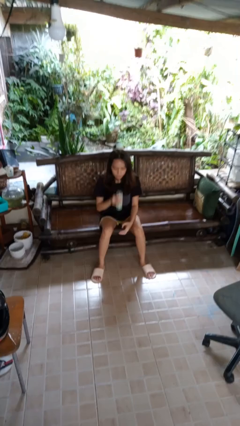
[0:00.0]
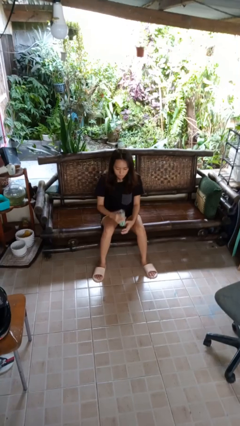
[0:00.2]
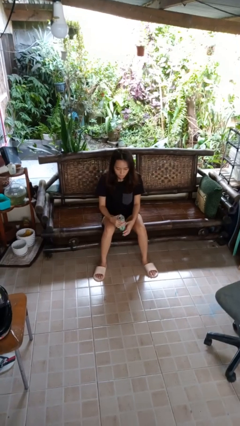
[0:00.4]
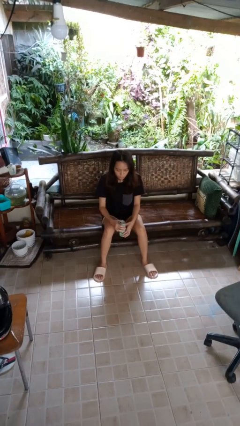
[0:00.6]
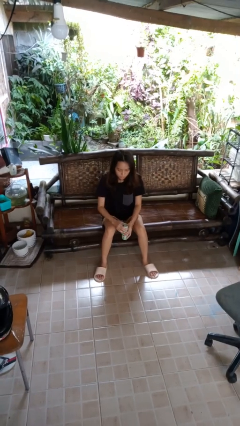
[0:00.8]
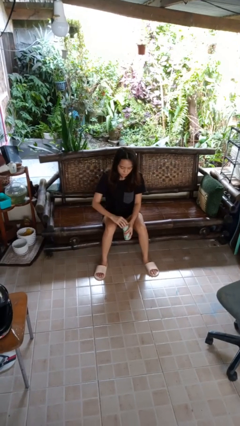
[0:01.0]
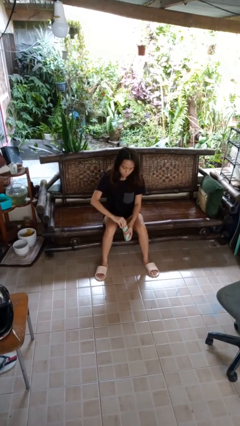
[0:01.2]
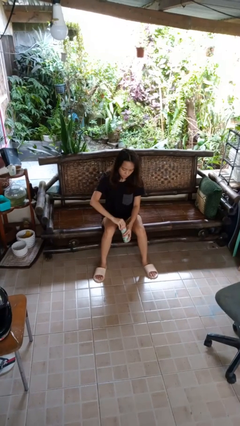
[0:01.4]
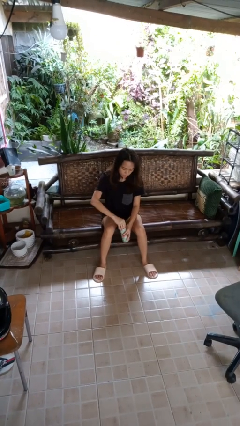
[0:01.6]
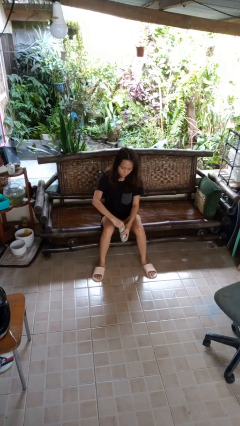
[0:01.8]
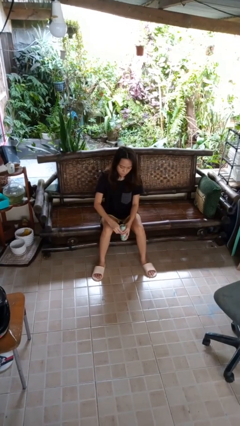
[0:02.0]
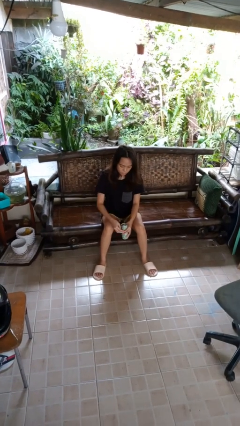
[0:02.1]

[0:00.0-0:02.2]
person opens beverage can

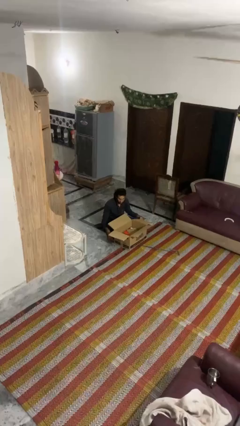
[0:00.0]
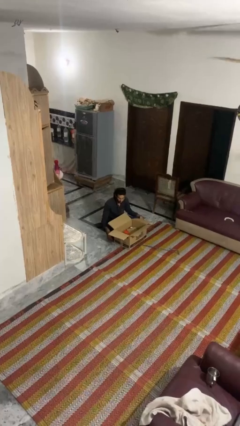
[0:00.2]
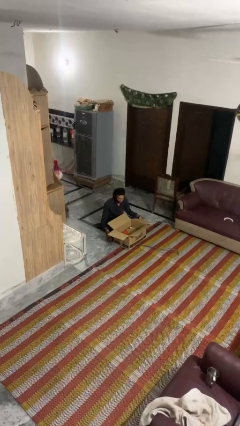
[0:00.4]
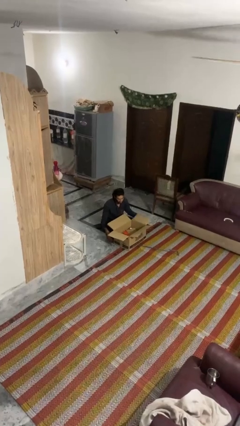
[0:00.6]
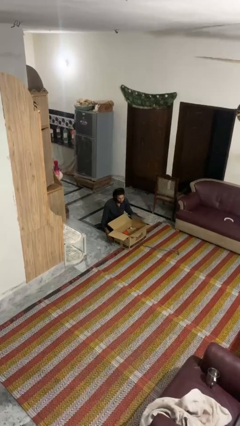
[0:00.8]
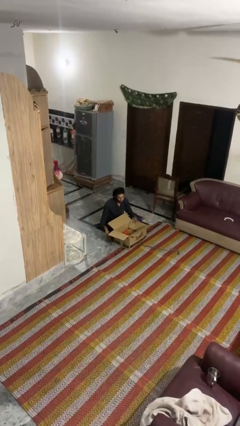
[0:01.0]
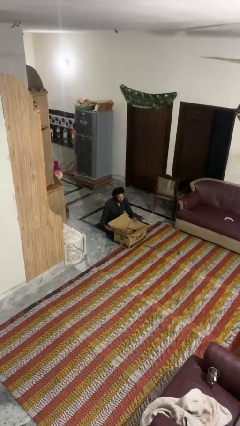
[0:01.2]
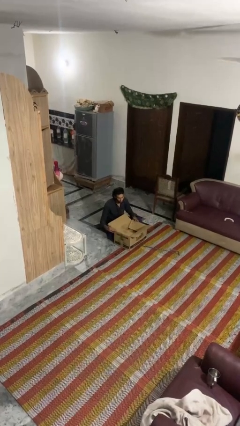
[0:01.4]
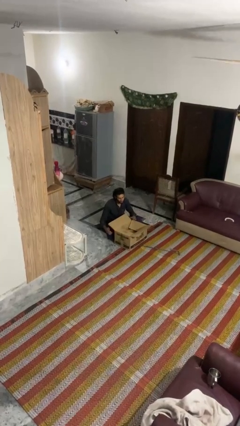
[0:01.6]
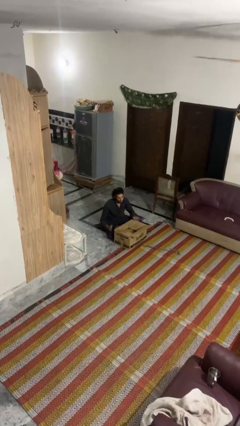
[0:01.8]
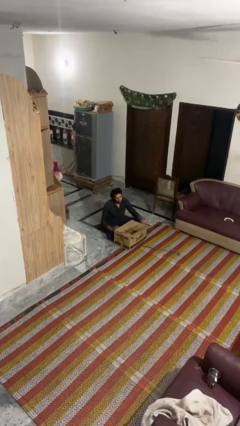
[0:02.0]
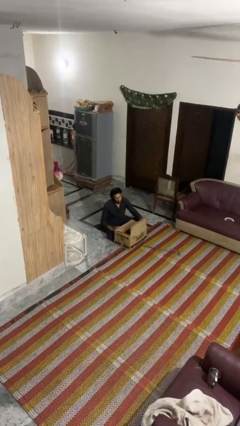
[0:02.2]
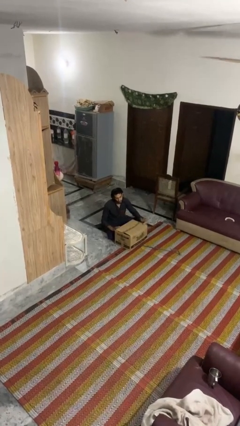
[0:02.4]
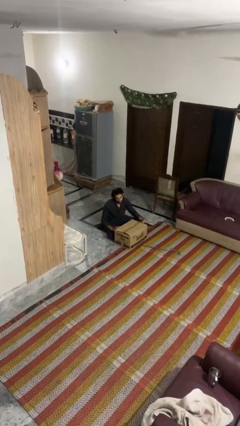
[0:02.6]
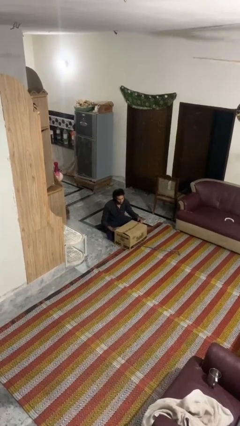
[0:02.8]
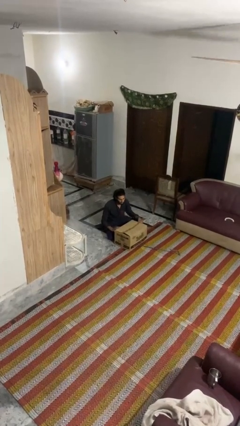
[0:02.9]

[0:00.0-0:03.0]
person closes box

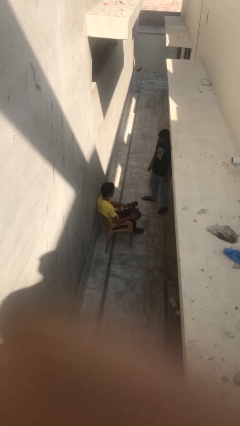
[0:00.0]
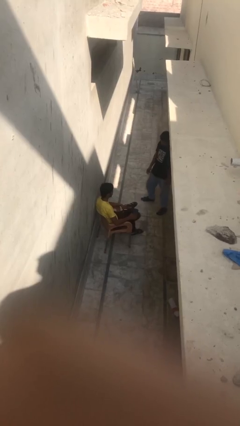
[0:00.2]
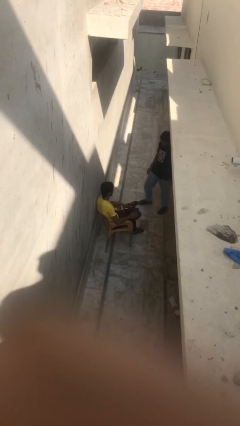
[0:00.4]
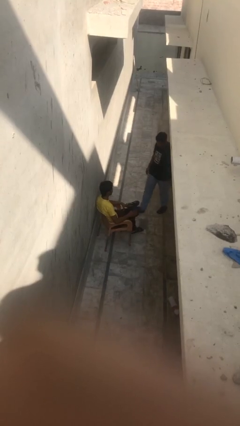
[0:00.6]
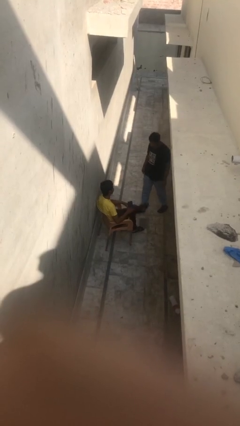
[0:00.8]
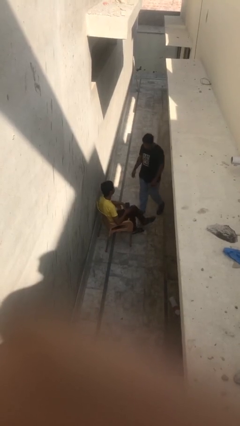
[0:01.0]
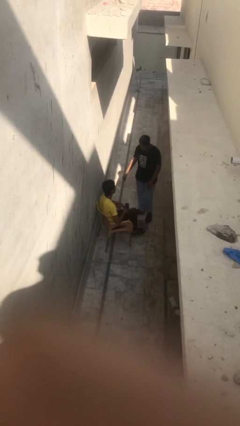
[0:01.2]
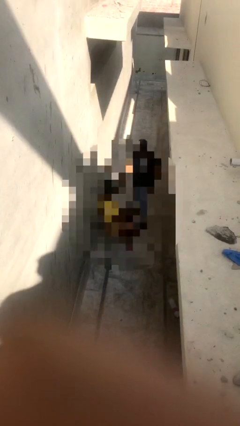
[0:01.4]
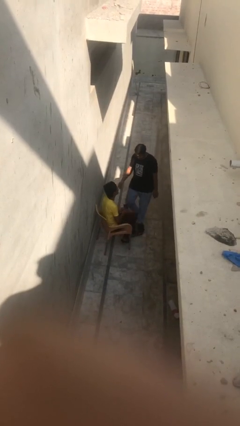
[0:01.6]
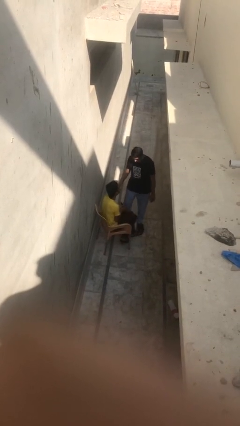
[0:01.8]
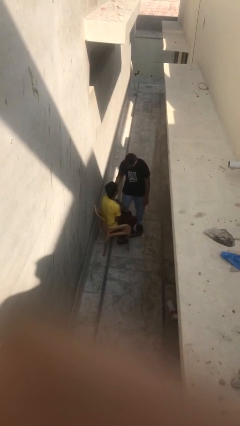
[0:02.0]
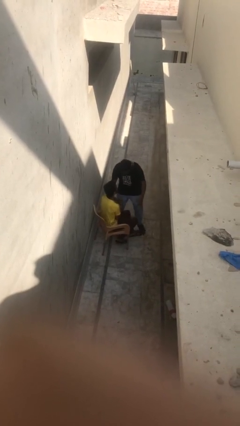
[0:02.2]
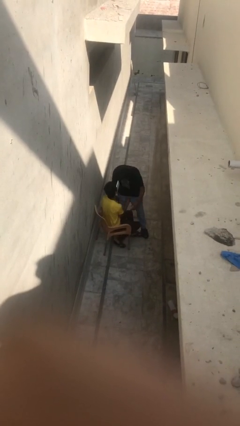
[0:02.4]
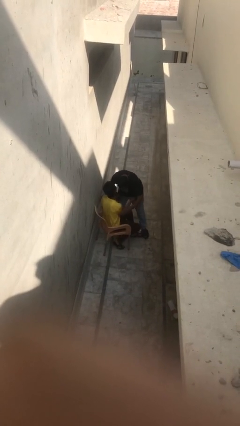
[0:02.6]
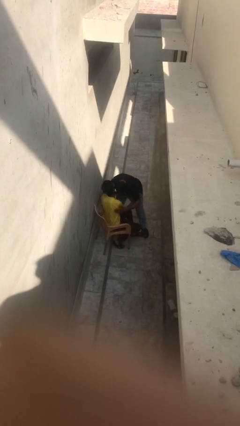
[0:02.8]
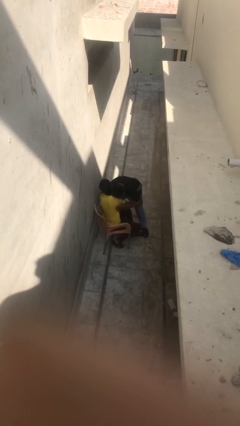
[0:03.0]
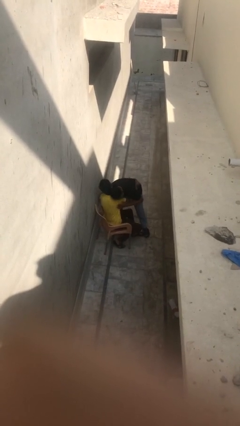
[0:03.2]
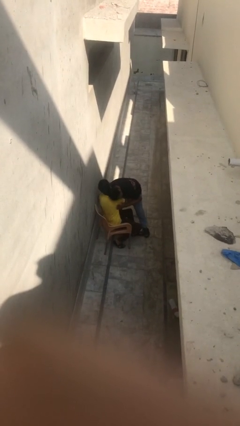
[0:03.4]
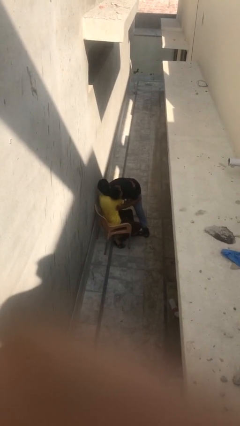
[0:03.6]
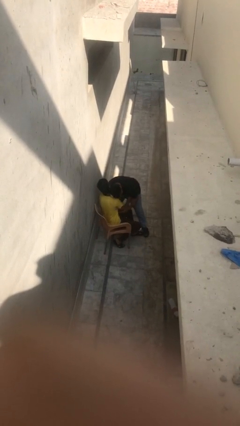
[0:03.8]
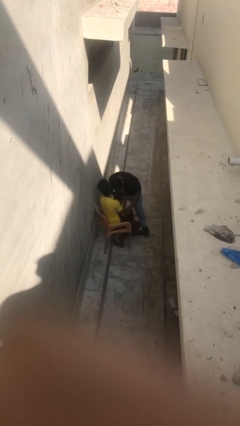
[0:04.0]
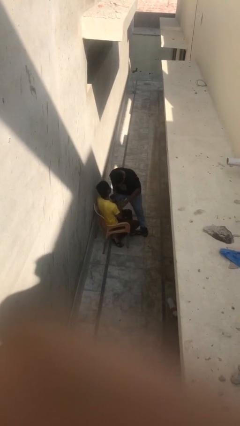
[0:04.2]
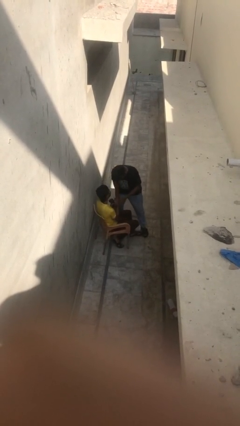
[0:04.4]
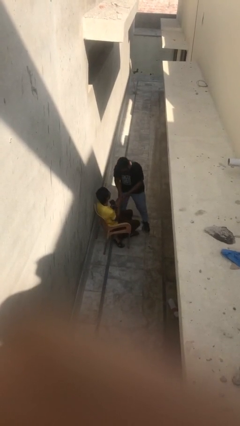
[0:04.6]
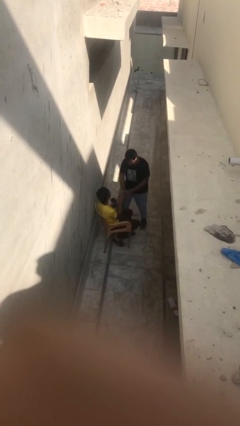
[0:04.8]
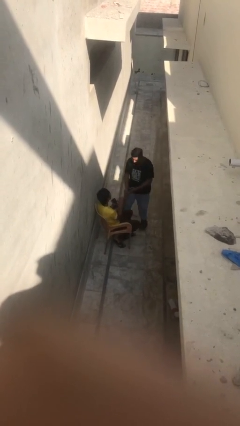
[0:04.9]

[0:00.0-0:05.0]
person embraces person

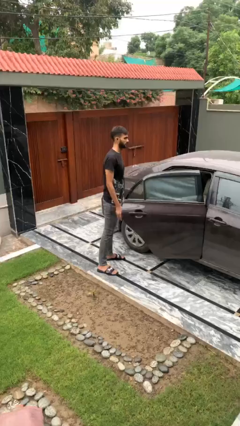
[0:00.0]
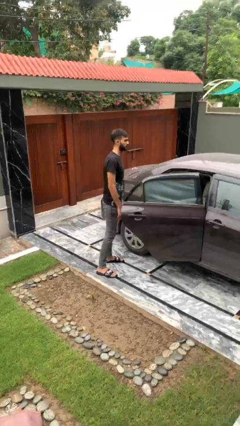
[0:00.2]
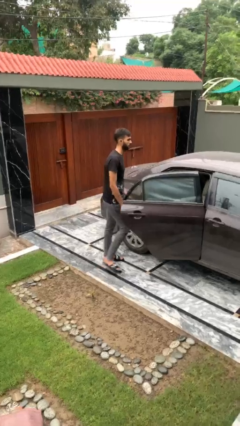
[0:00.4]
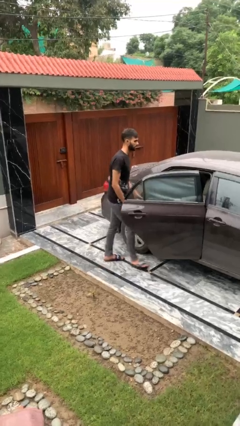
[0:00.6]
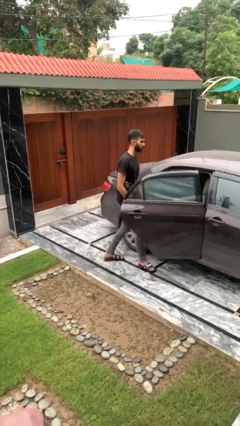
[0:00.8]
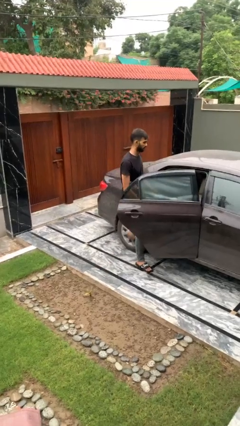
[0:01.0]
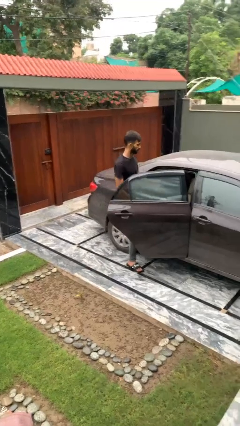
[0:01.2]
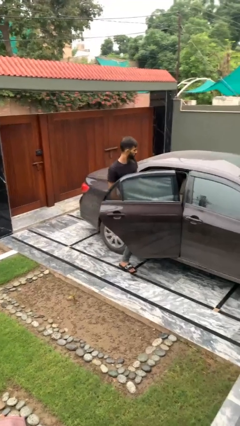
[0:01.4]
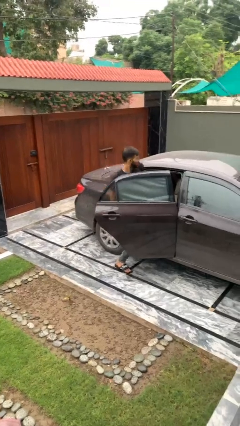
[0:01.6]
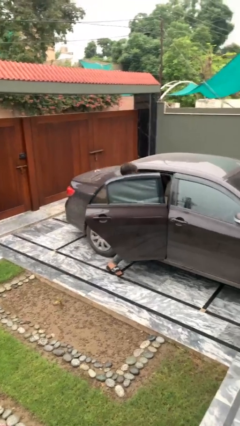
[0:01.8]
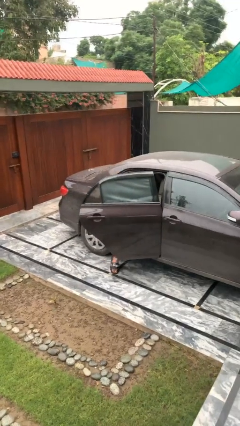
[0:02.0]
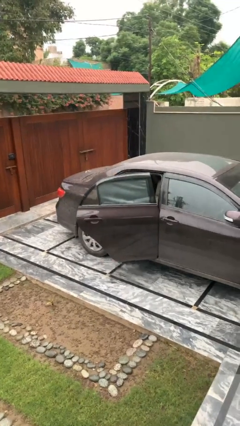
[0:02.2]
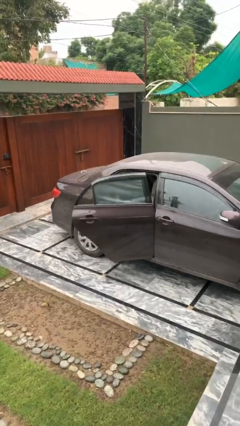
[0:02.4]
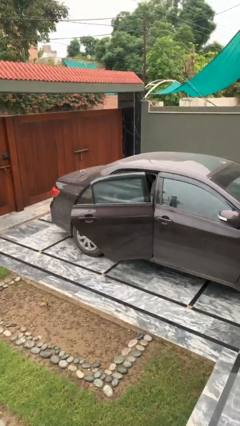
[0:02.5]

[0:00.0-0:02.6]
person enters car

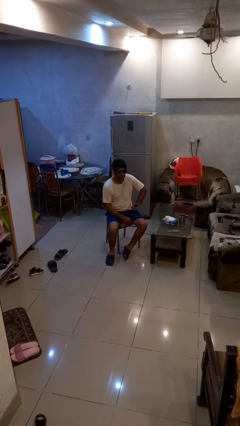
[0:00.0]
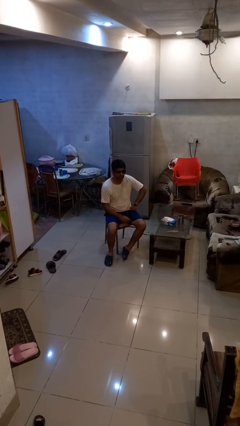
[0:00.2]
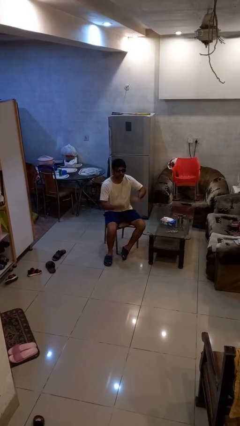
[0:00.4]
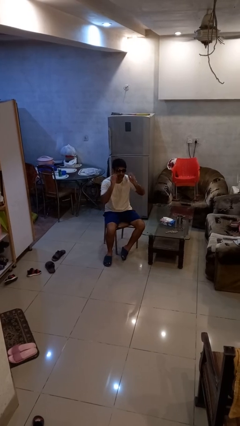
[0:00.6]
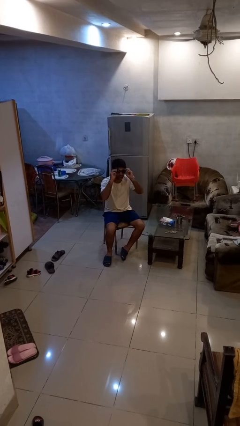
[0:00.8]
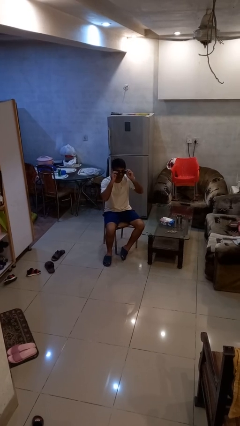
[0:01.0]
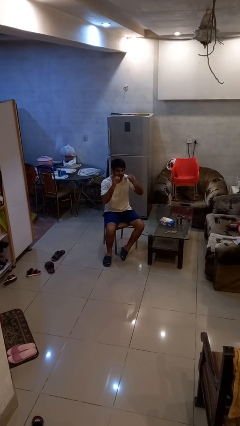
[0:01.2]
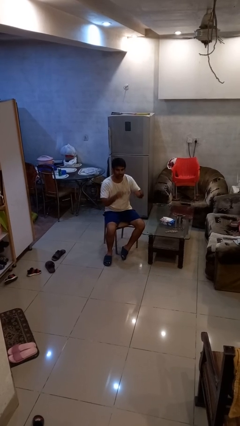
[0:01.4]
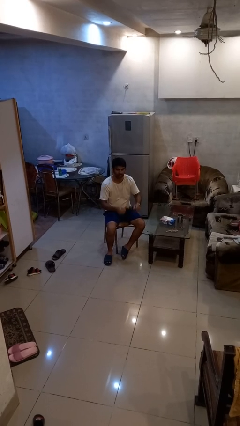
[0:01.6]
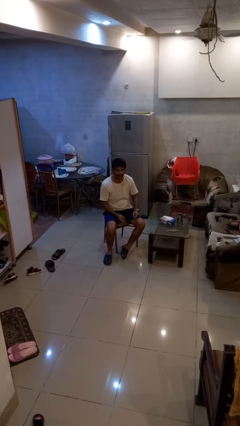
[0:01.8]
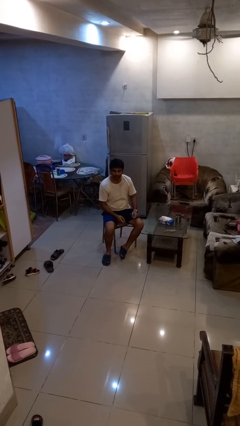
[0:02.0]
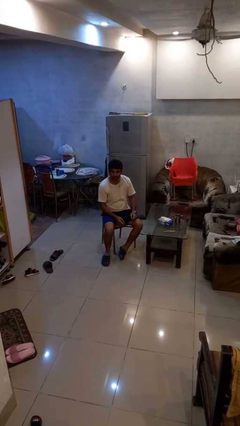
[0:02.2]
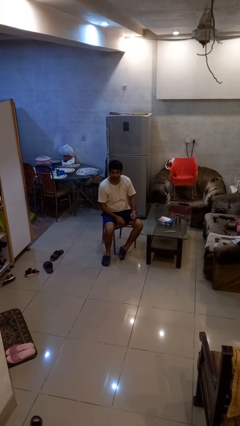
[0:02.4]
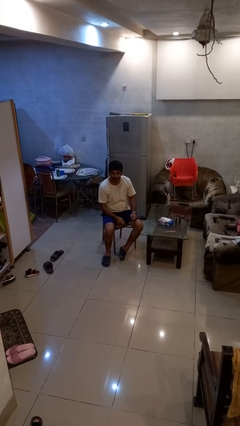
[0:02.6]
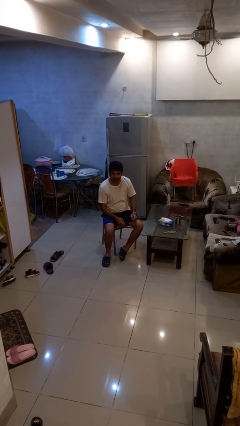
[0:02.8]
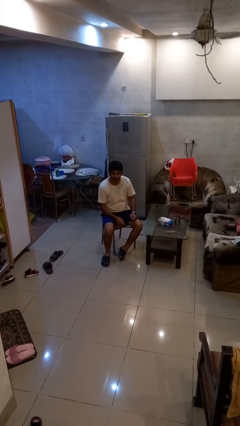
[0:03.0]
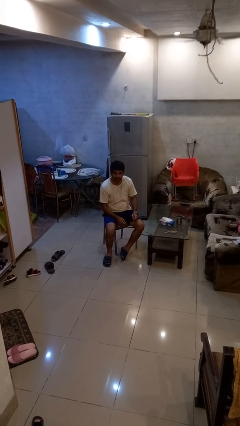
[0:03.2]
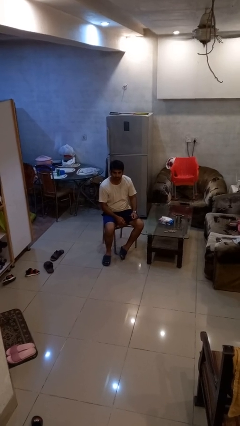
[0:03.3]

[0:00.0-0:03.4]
person takes off sunglasses

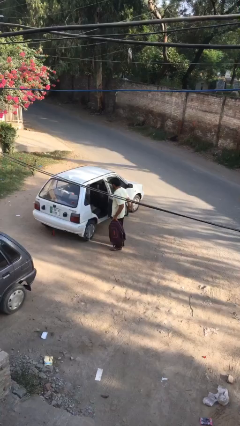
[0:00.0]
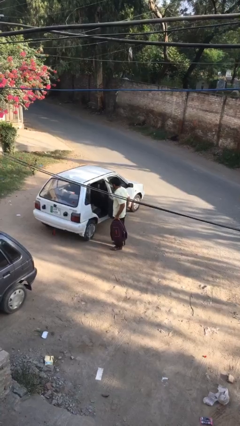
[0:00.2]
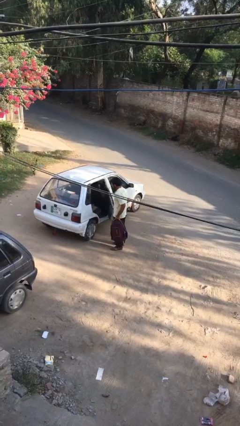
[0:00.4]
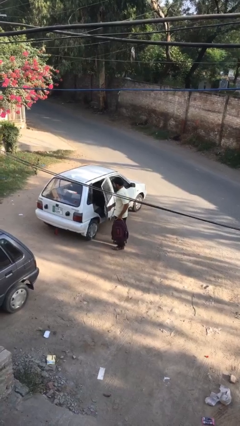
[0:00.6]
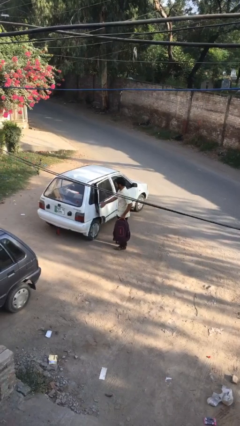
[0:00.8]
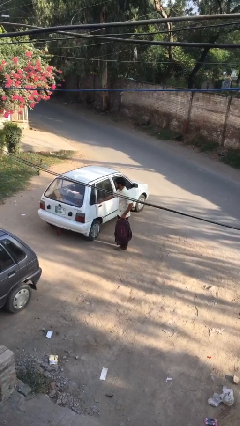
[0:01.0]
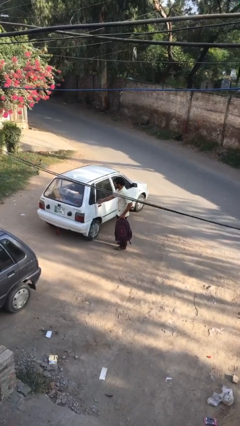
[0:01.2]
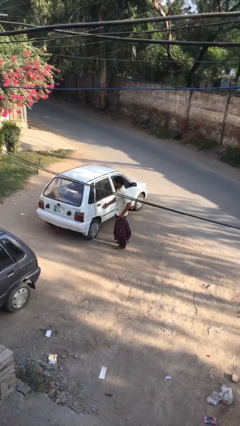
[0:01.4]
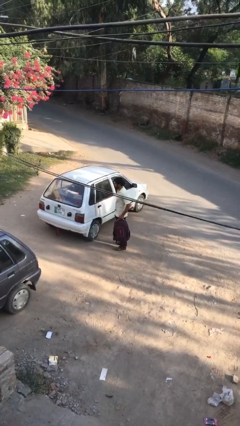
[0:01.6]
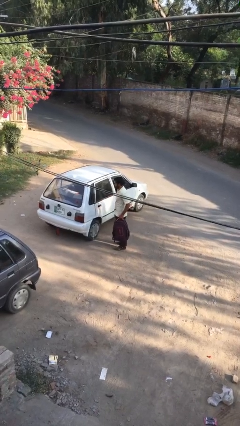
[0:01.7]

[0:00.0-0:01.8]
person closes car door
